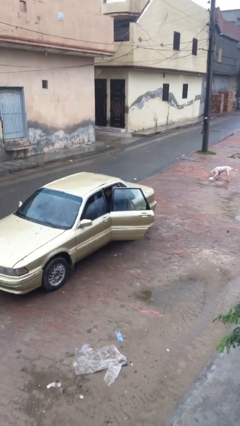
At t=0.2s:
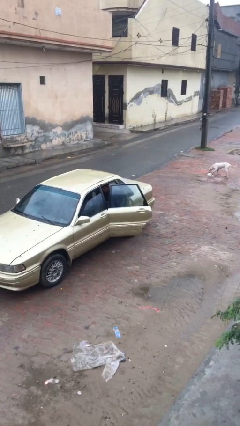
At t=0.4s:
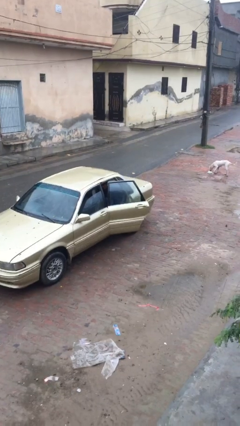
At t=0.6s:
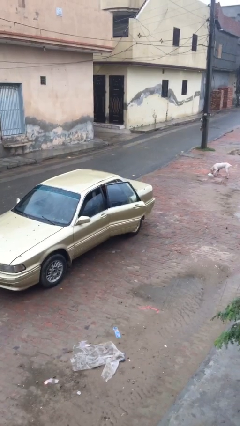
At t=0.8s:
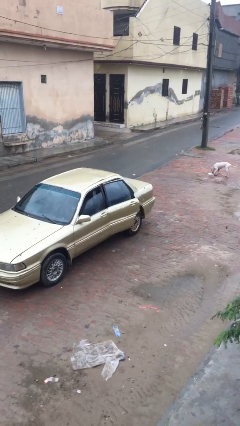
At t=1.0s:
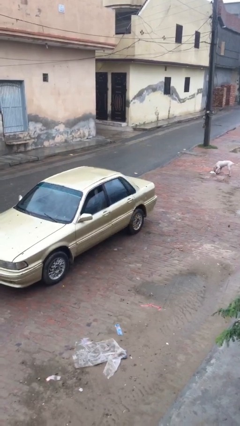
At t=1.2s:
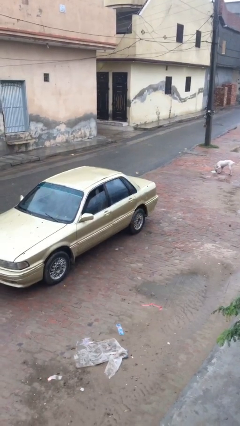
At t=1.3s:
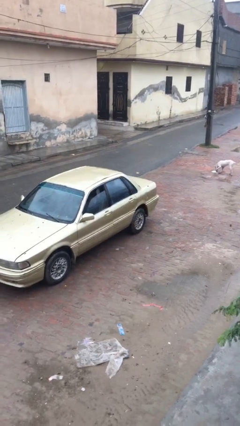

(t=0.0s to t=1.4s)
person closes car door

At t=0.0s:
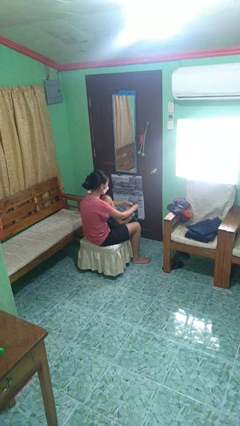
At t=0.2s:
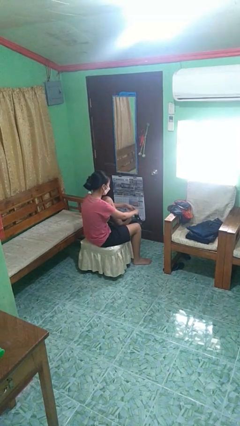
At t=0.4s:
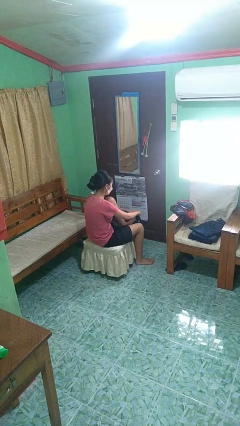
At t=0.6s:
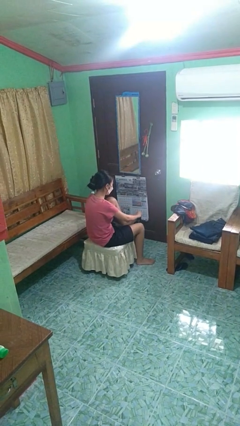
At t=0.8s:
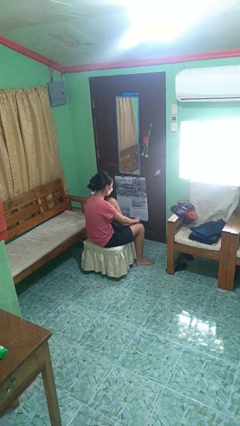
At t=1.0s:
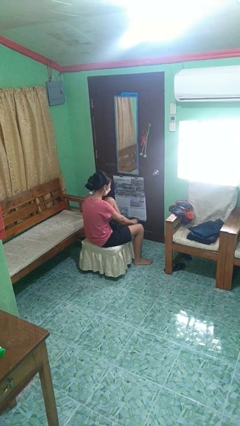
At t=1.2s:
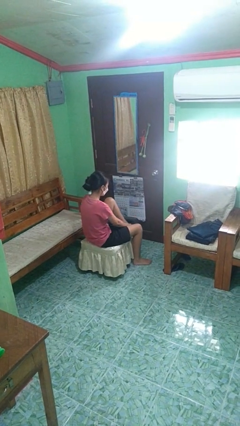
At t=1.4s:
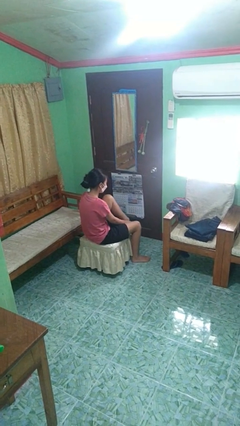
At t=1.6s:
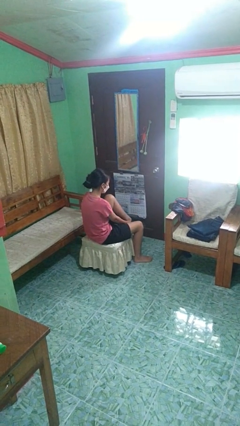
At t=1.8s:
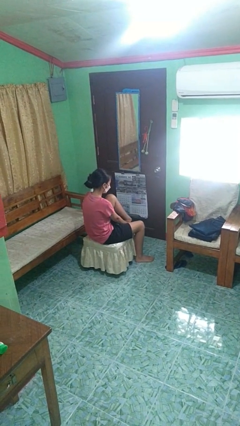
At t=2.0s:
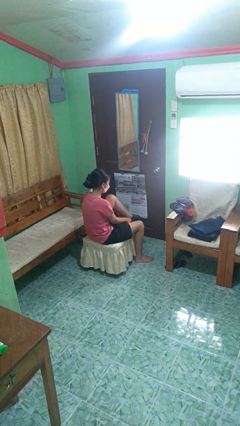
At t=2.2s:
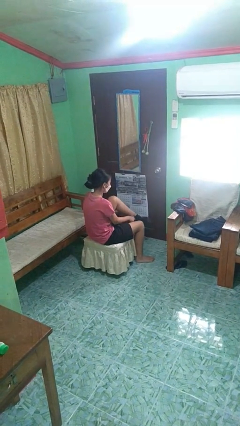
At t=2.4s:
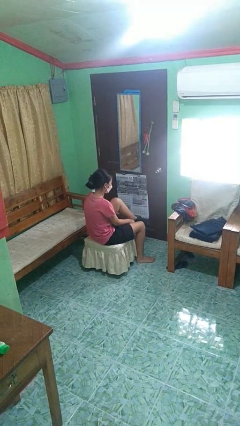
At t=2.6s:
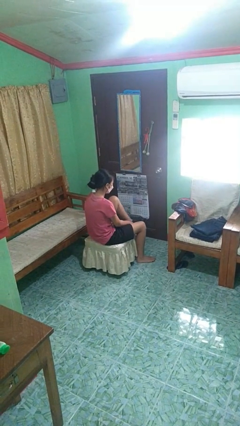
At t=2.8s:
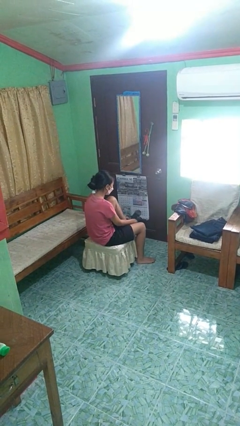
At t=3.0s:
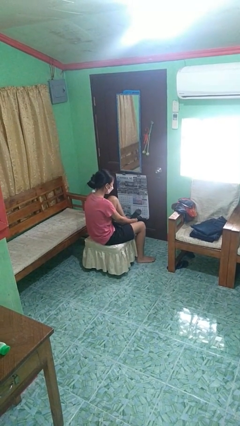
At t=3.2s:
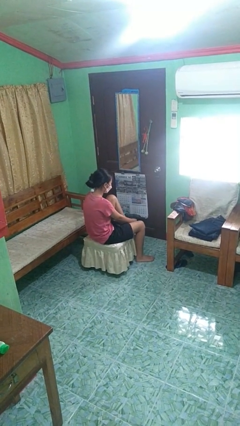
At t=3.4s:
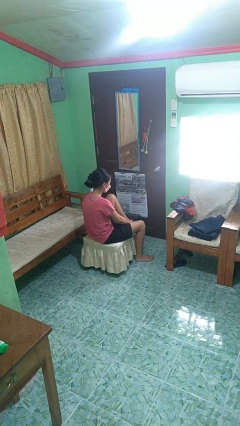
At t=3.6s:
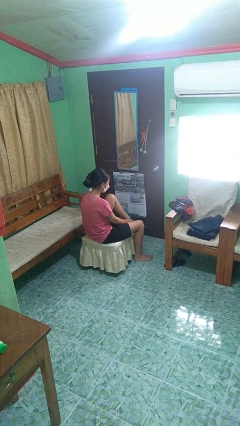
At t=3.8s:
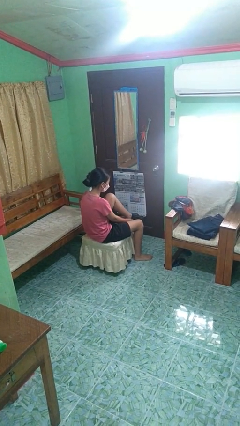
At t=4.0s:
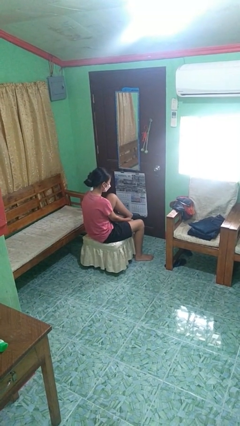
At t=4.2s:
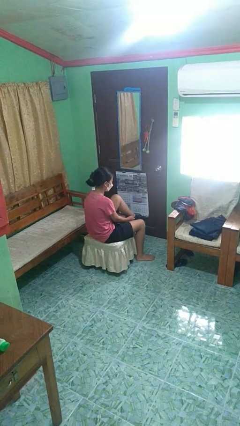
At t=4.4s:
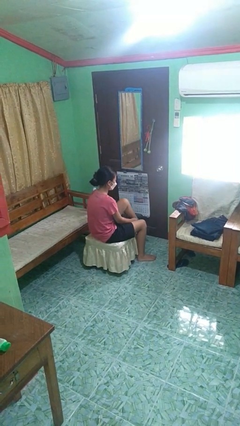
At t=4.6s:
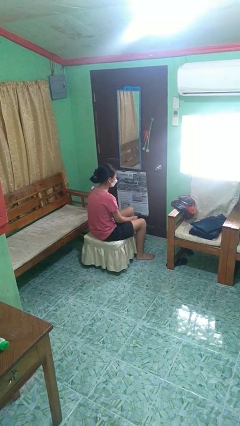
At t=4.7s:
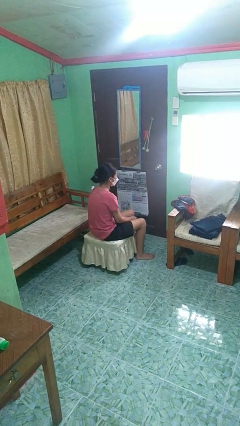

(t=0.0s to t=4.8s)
person puts on socks

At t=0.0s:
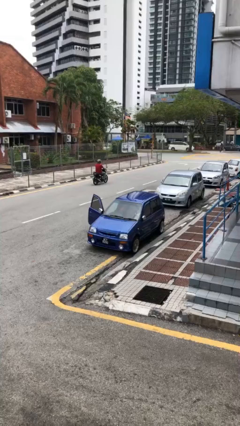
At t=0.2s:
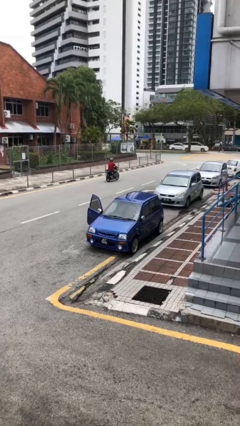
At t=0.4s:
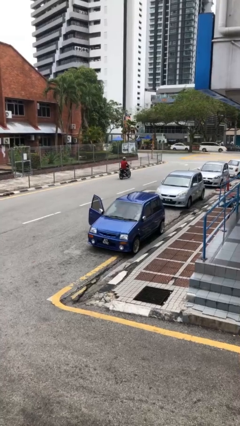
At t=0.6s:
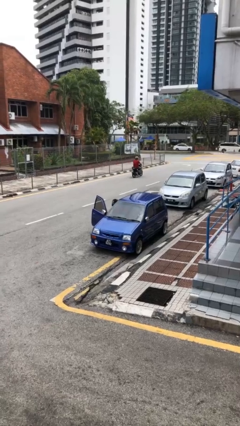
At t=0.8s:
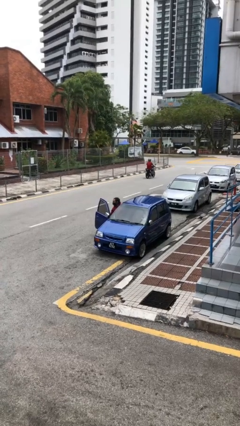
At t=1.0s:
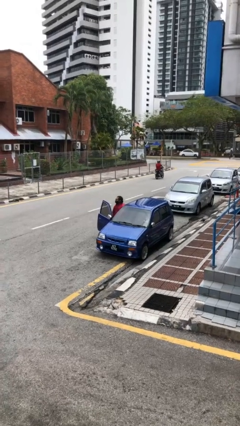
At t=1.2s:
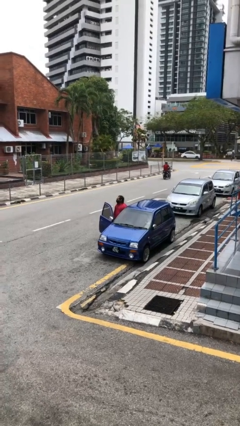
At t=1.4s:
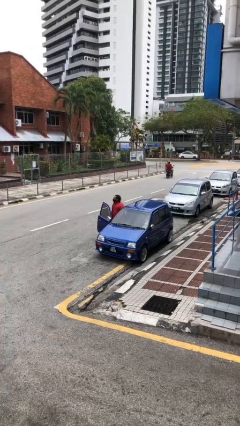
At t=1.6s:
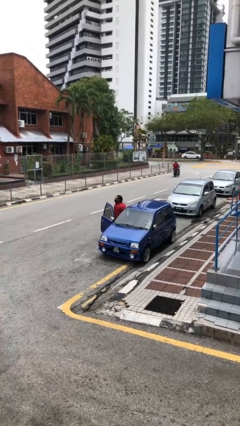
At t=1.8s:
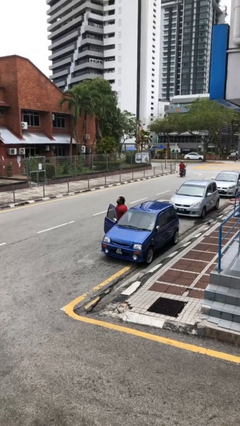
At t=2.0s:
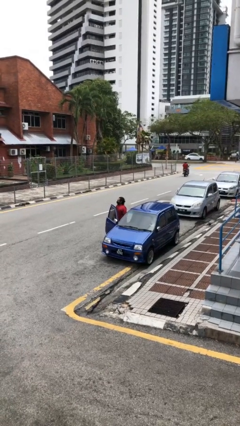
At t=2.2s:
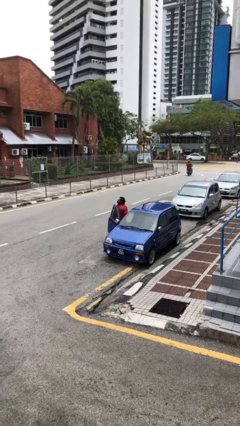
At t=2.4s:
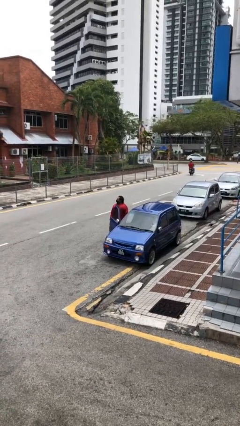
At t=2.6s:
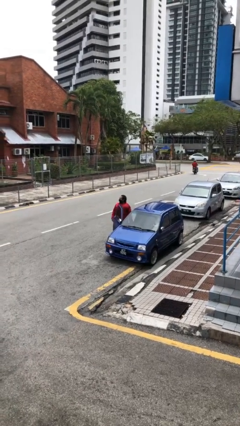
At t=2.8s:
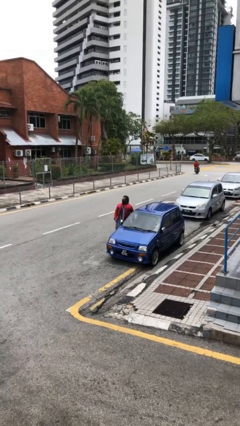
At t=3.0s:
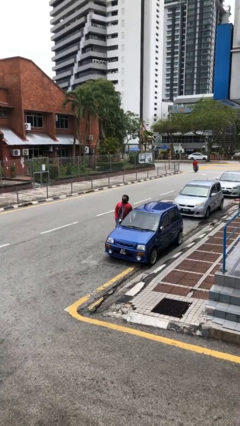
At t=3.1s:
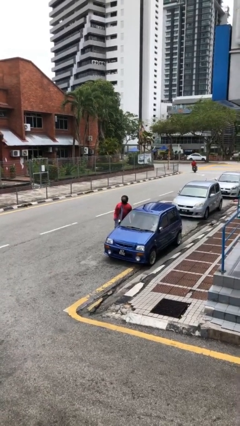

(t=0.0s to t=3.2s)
person exits car

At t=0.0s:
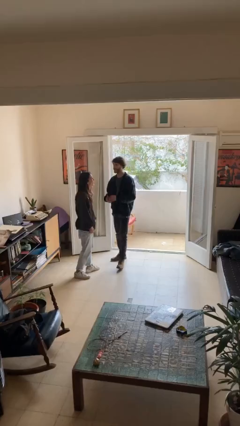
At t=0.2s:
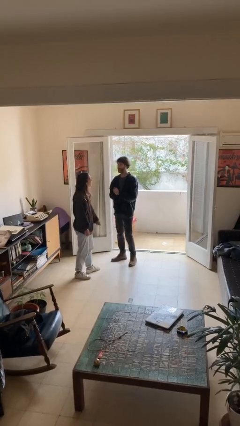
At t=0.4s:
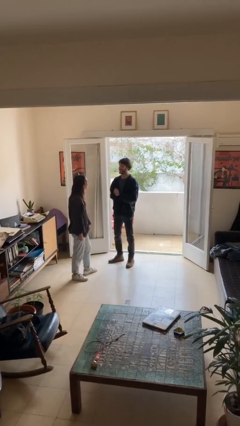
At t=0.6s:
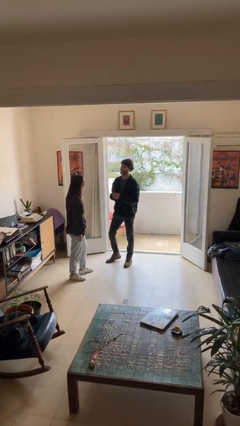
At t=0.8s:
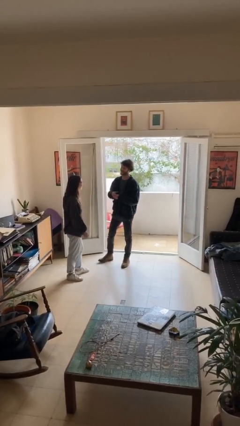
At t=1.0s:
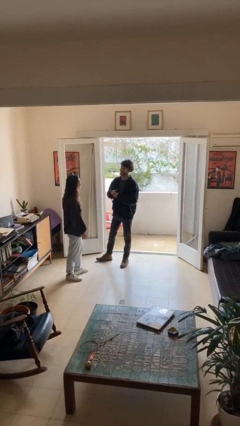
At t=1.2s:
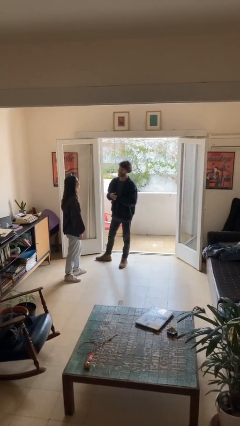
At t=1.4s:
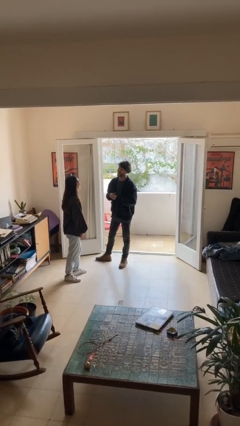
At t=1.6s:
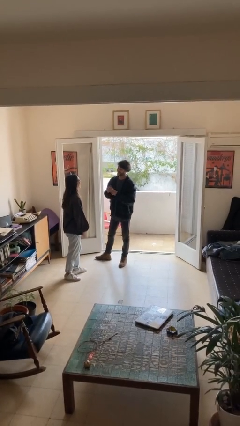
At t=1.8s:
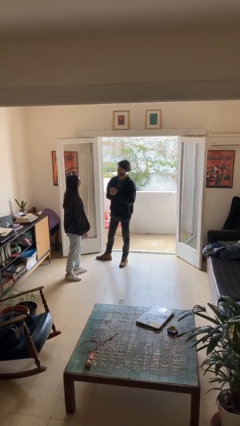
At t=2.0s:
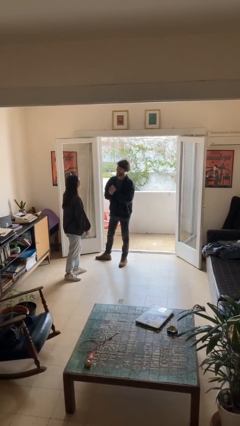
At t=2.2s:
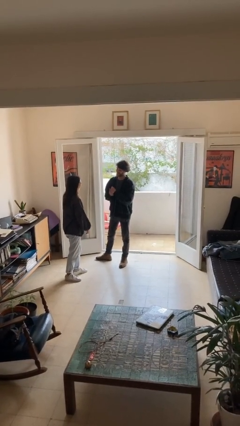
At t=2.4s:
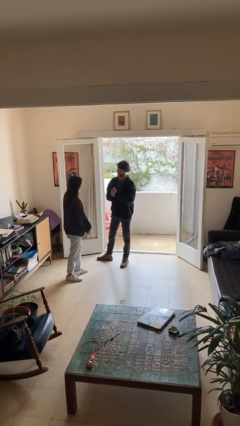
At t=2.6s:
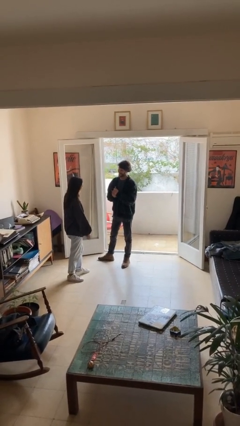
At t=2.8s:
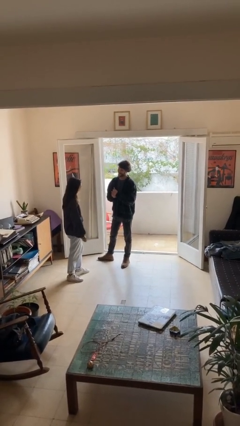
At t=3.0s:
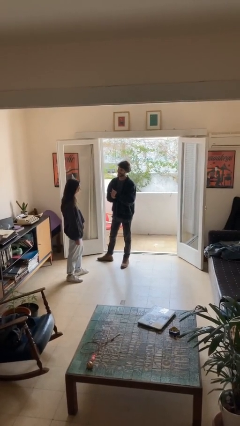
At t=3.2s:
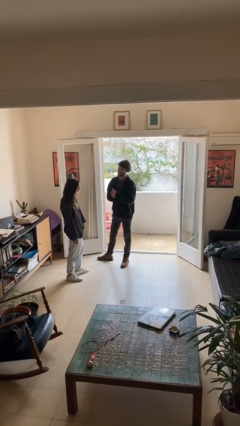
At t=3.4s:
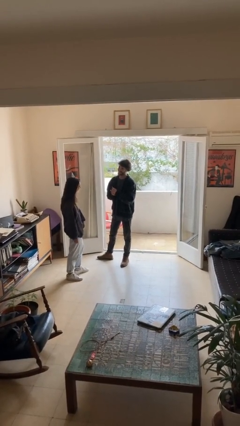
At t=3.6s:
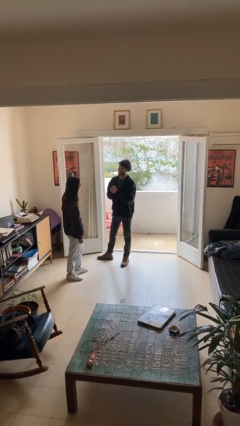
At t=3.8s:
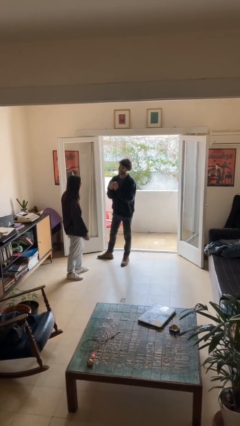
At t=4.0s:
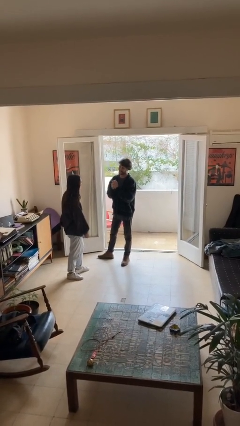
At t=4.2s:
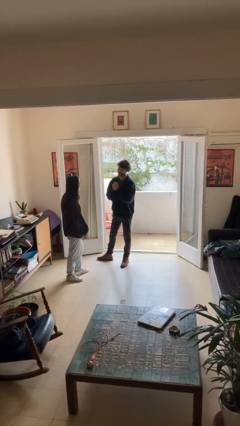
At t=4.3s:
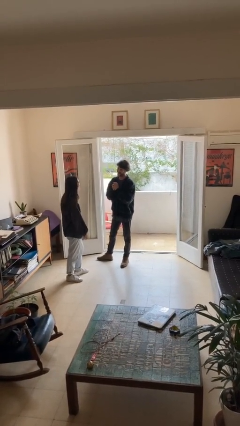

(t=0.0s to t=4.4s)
person talks to person

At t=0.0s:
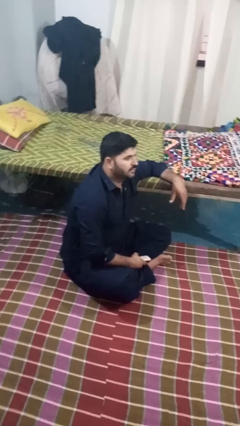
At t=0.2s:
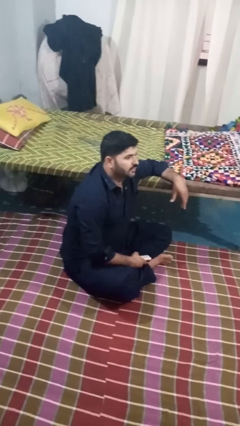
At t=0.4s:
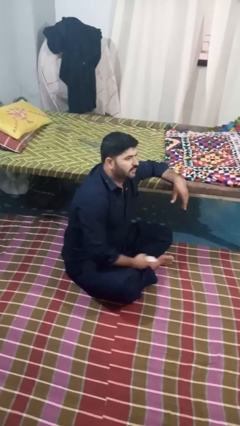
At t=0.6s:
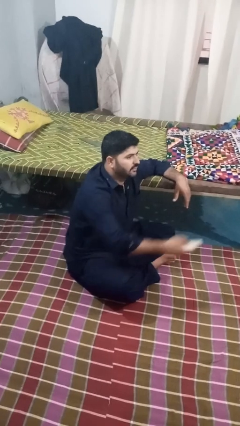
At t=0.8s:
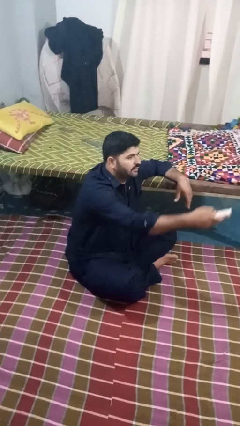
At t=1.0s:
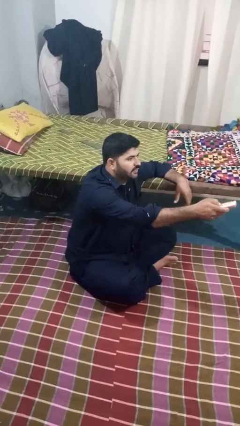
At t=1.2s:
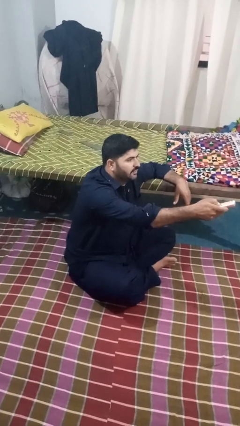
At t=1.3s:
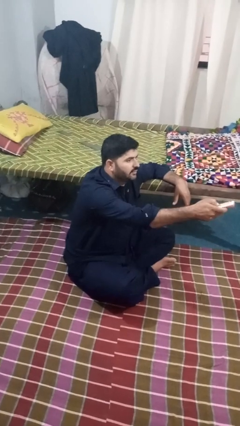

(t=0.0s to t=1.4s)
person uses television remote

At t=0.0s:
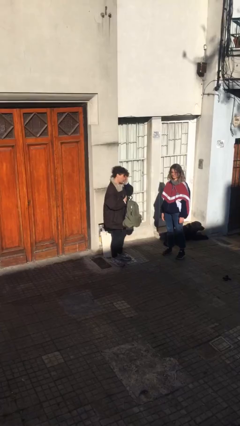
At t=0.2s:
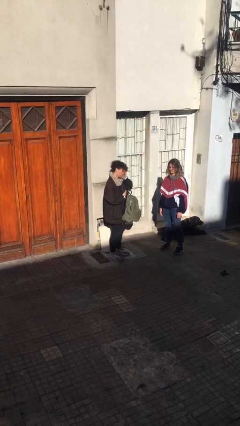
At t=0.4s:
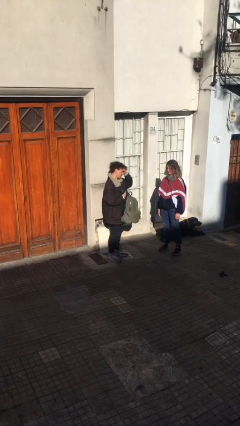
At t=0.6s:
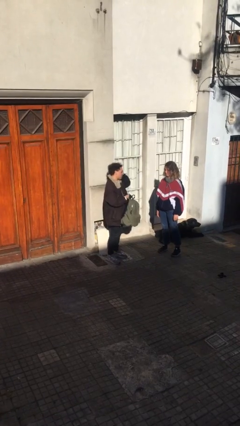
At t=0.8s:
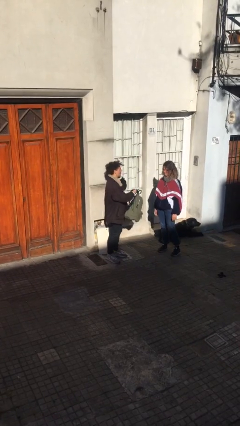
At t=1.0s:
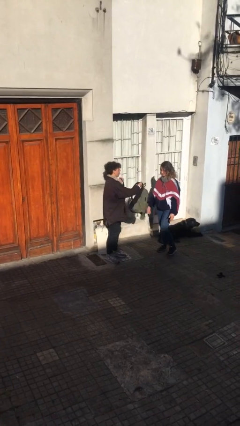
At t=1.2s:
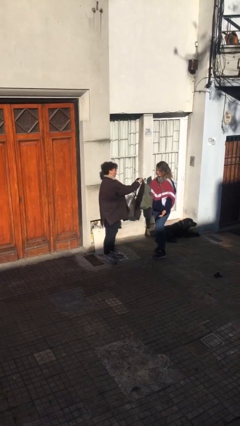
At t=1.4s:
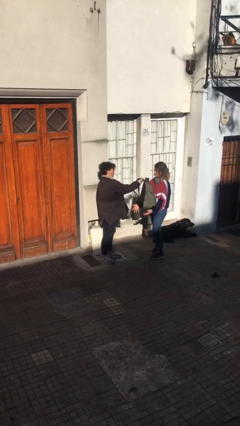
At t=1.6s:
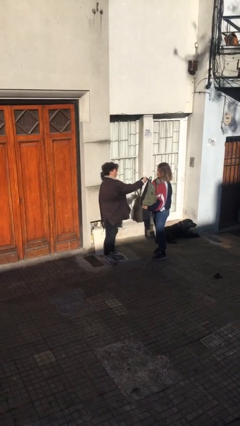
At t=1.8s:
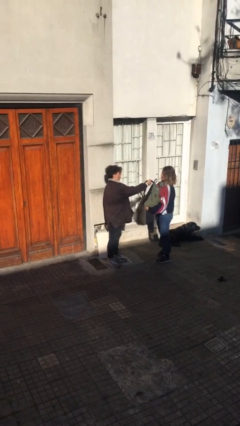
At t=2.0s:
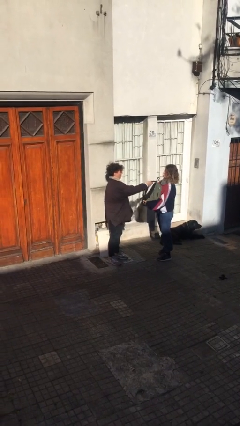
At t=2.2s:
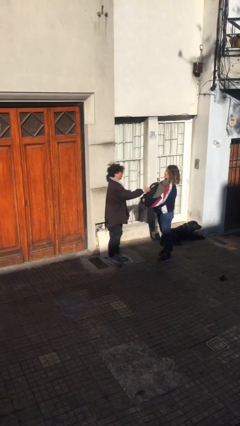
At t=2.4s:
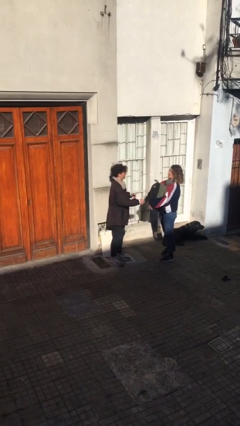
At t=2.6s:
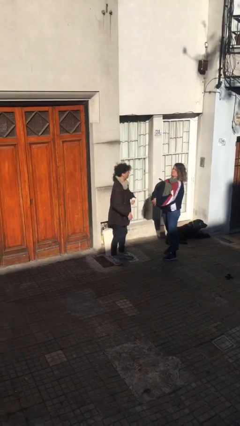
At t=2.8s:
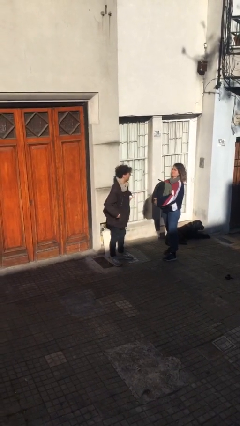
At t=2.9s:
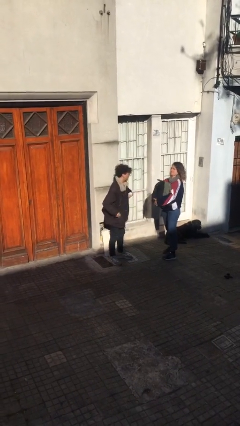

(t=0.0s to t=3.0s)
person transfers object to person
